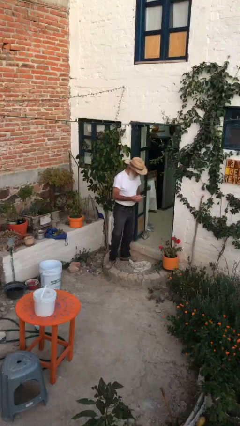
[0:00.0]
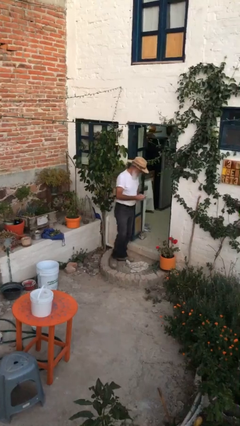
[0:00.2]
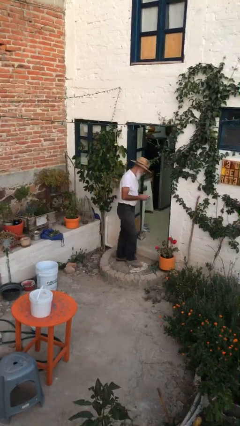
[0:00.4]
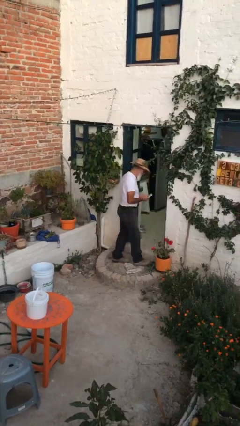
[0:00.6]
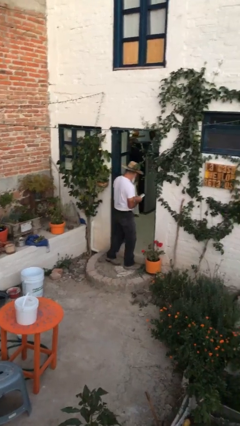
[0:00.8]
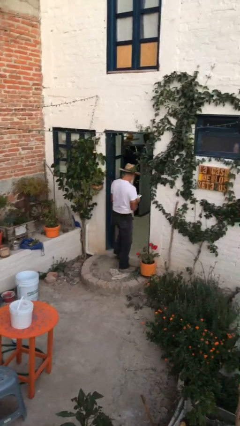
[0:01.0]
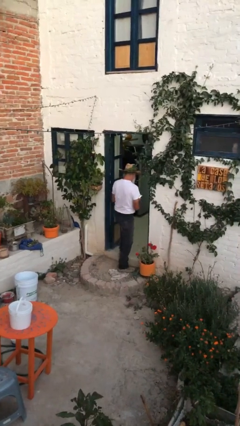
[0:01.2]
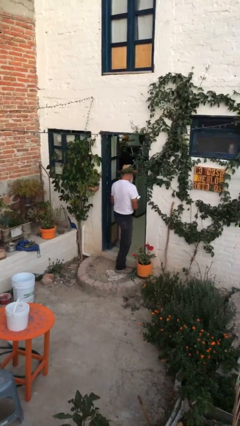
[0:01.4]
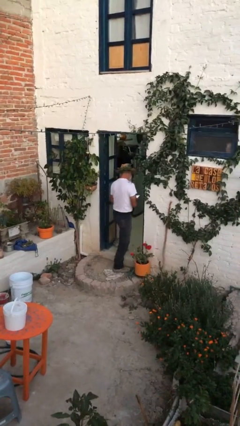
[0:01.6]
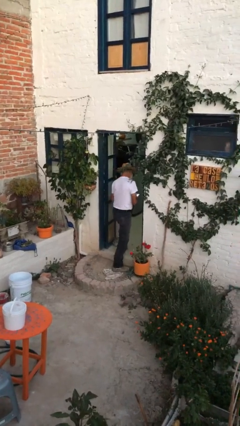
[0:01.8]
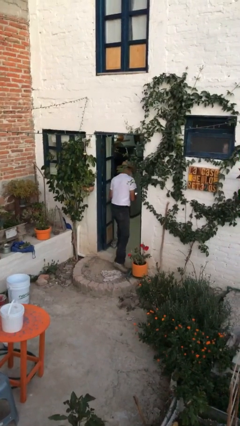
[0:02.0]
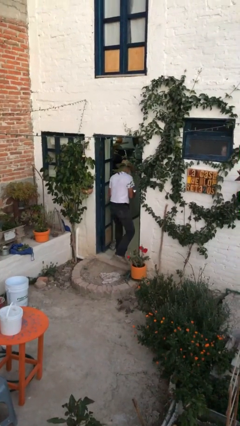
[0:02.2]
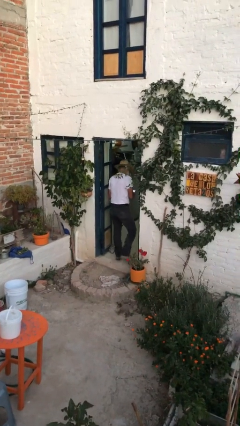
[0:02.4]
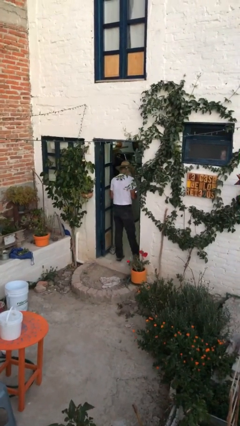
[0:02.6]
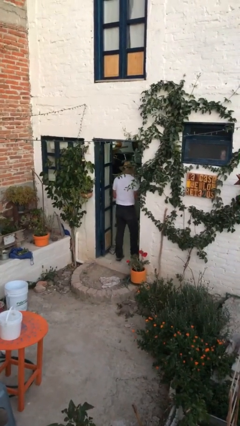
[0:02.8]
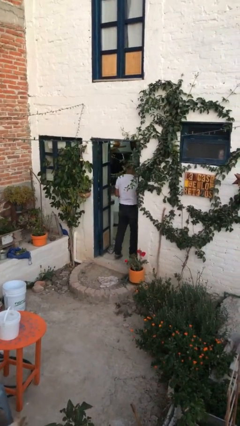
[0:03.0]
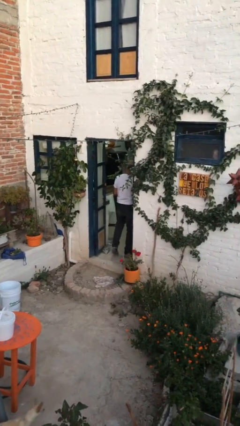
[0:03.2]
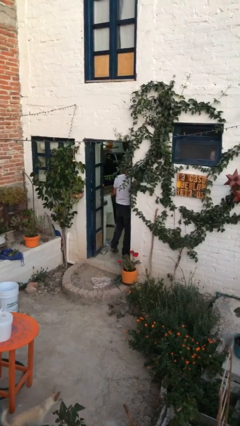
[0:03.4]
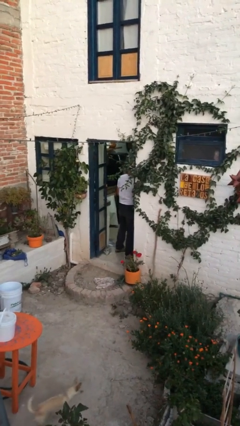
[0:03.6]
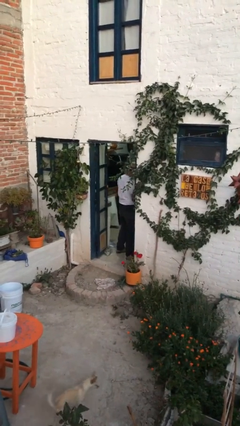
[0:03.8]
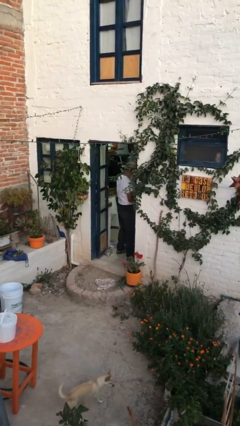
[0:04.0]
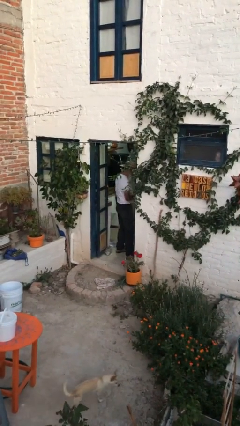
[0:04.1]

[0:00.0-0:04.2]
person exits scene through structure

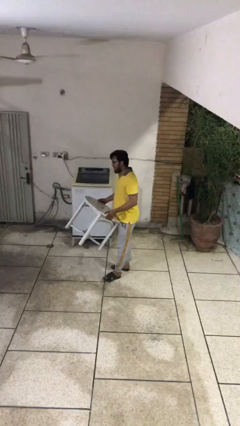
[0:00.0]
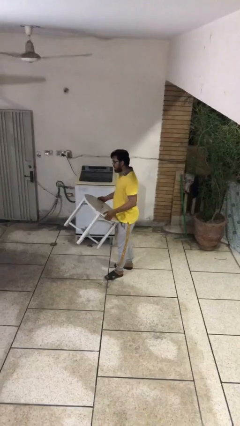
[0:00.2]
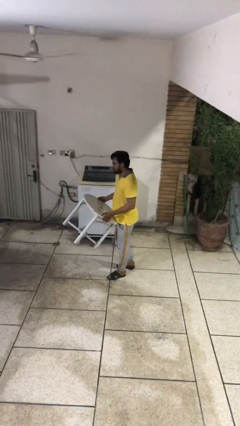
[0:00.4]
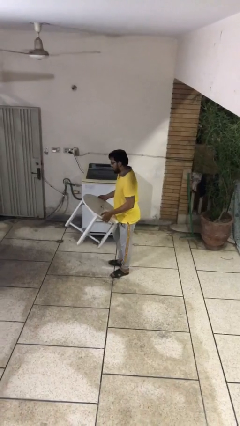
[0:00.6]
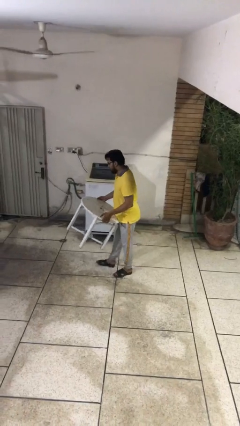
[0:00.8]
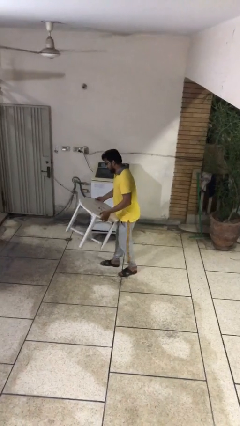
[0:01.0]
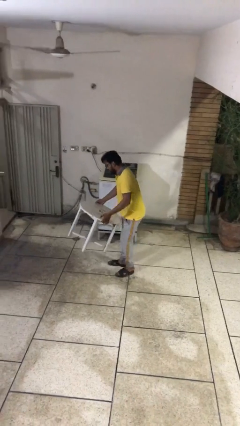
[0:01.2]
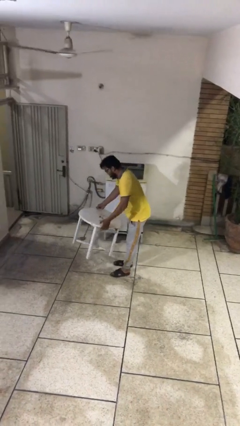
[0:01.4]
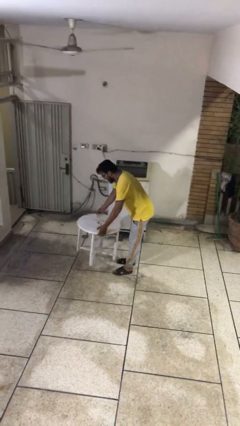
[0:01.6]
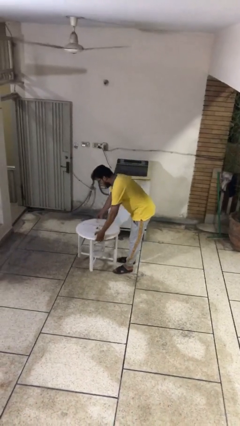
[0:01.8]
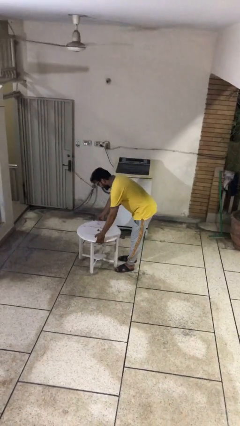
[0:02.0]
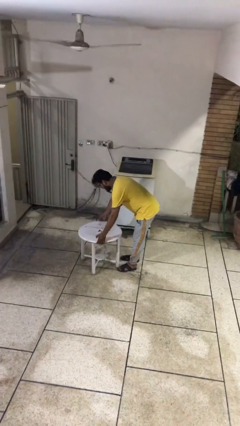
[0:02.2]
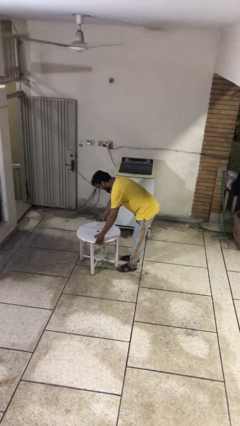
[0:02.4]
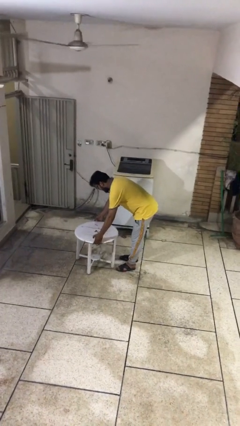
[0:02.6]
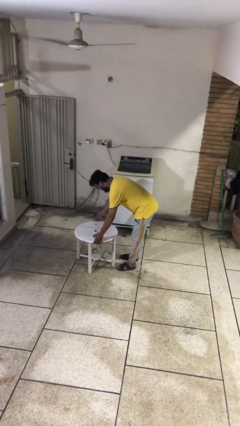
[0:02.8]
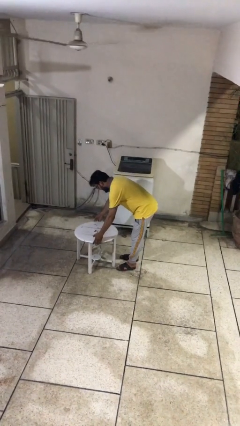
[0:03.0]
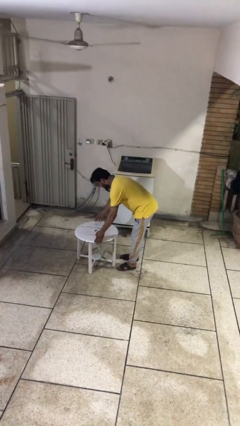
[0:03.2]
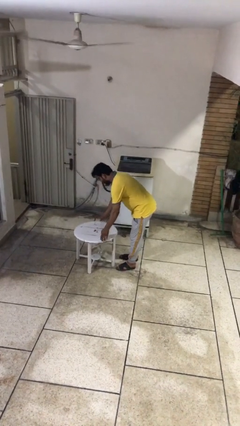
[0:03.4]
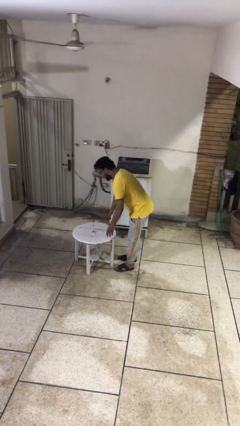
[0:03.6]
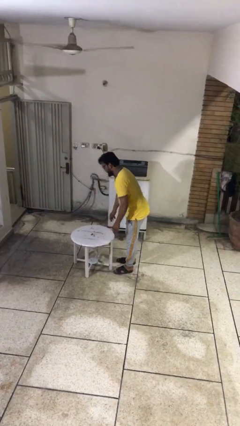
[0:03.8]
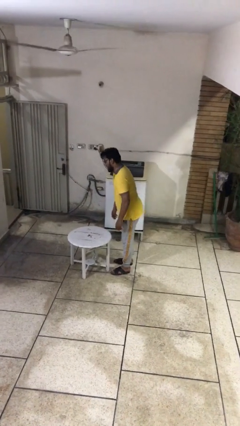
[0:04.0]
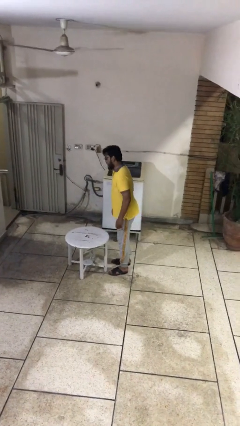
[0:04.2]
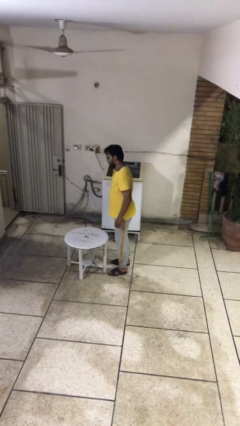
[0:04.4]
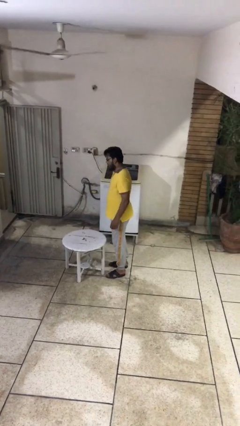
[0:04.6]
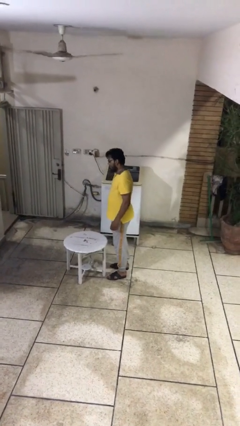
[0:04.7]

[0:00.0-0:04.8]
person puts down object on floor

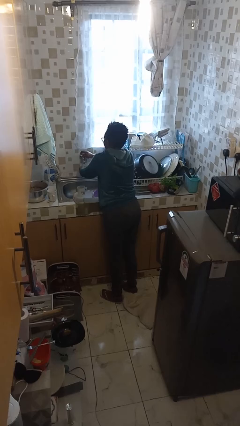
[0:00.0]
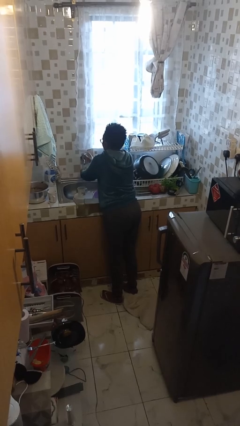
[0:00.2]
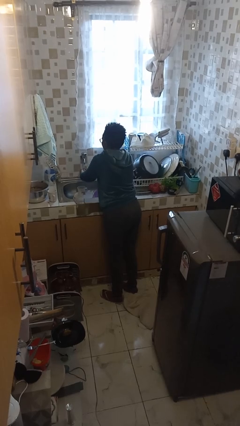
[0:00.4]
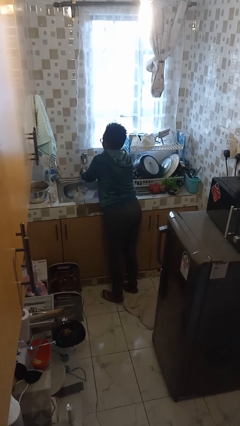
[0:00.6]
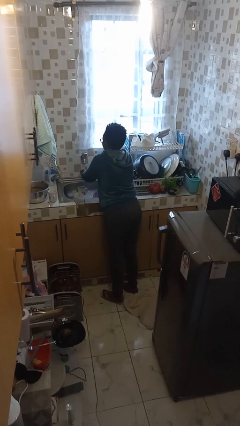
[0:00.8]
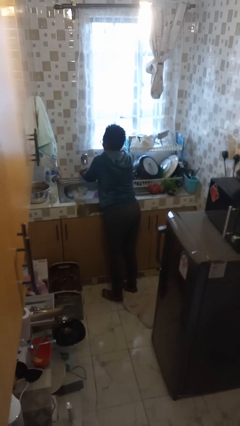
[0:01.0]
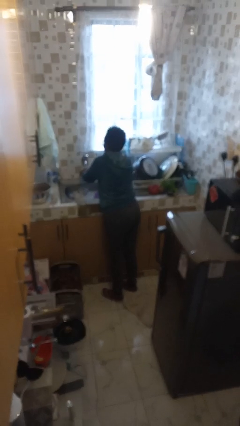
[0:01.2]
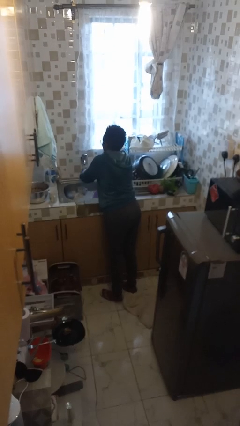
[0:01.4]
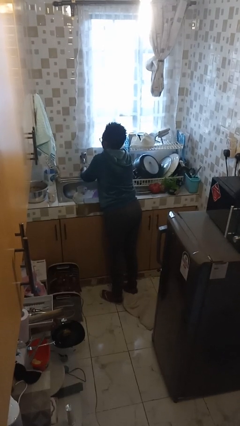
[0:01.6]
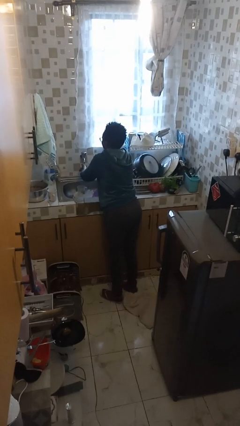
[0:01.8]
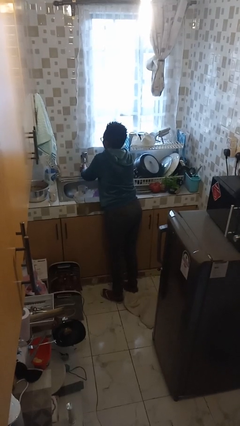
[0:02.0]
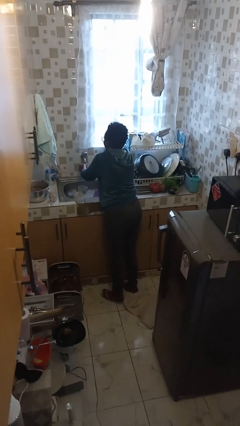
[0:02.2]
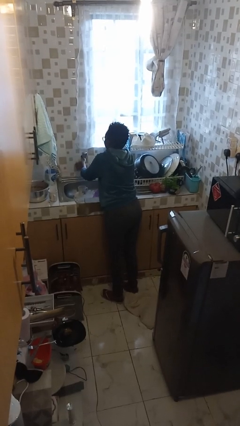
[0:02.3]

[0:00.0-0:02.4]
person washes hands

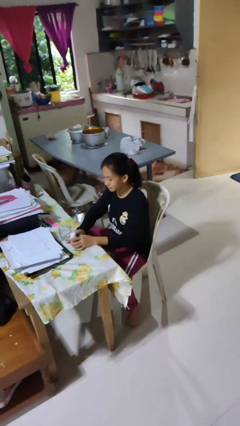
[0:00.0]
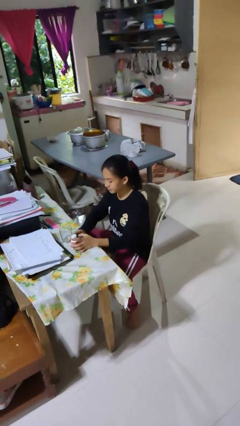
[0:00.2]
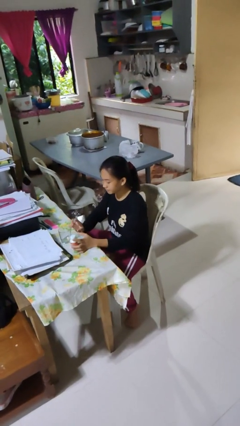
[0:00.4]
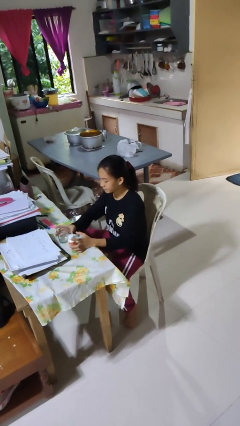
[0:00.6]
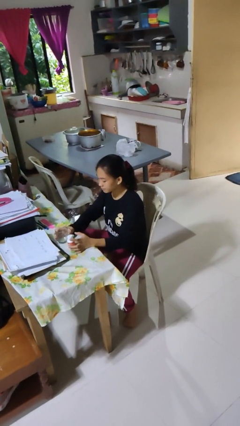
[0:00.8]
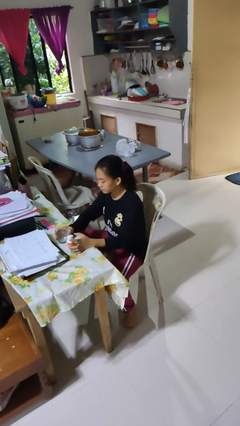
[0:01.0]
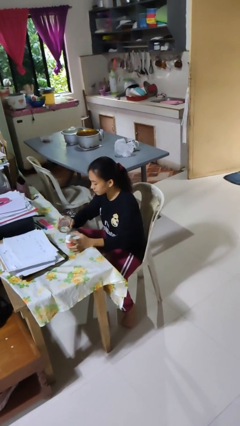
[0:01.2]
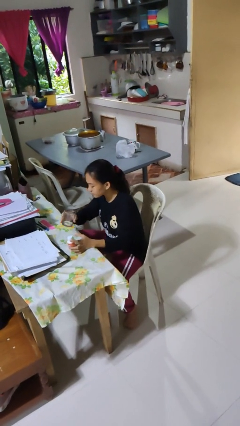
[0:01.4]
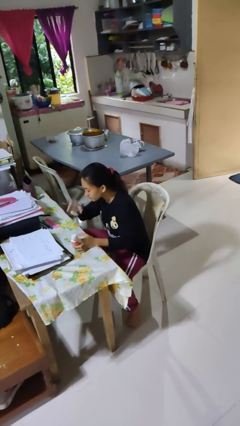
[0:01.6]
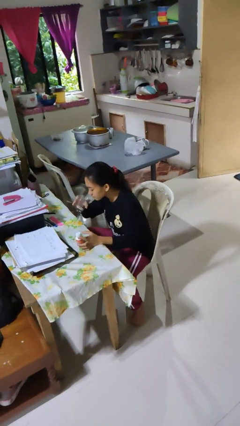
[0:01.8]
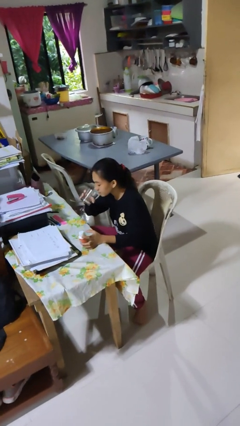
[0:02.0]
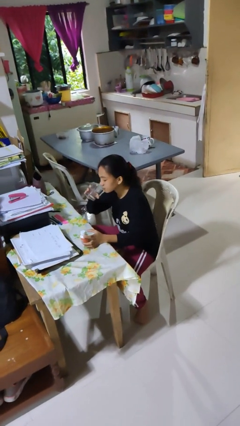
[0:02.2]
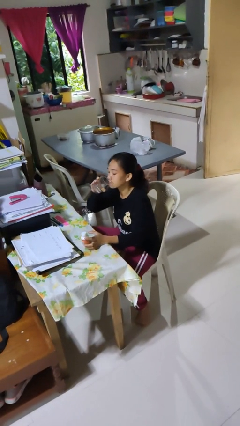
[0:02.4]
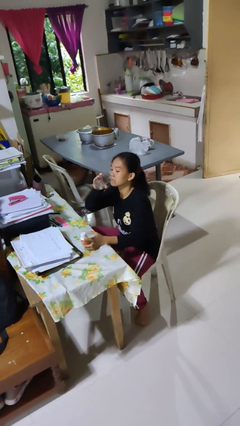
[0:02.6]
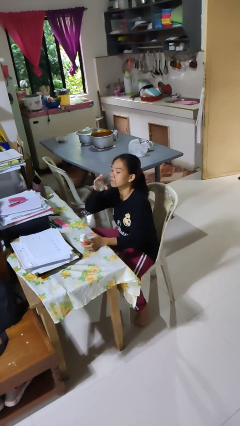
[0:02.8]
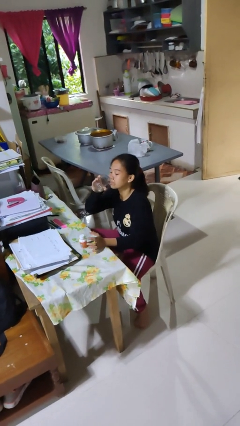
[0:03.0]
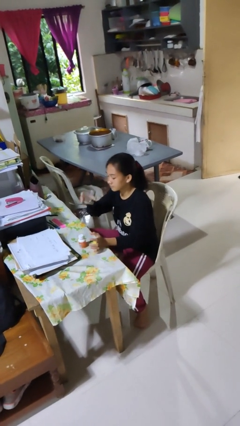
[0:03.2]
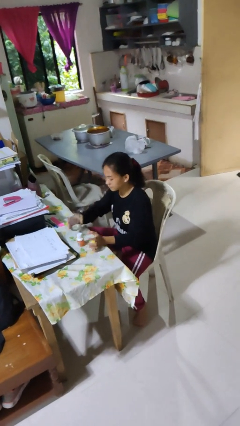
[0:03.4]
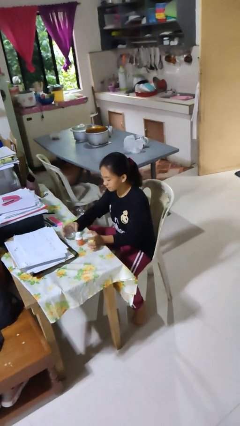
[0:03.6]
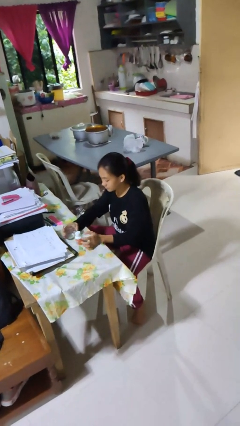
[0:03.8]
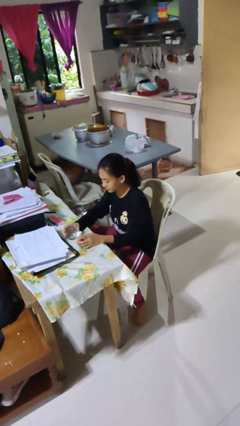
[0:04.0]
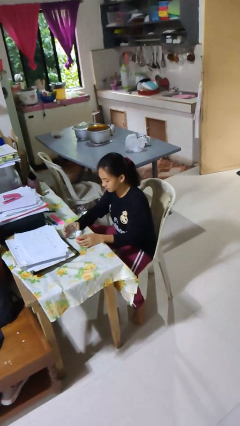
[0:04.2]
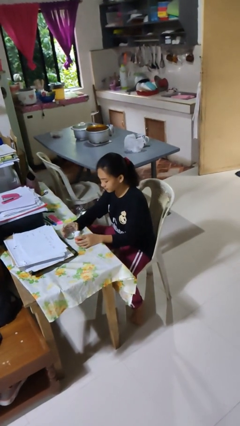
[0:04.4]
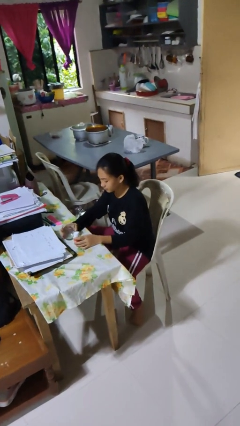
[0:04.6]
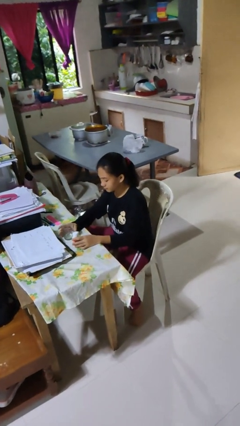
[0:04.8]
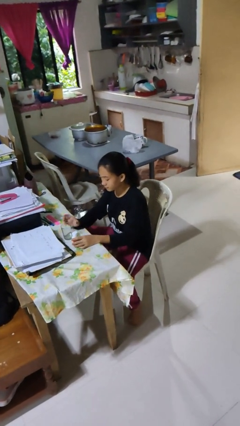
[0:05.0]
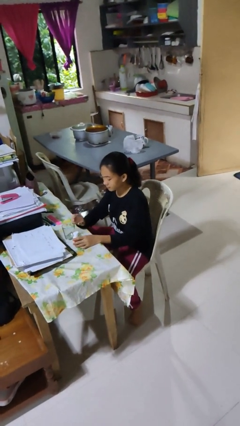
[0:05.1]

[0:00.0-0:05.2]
person drinks from cup

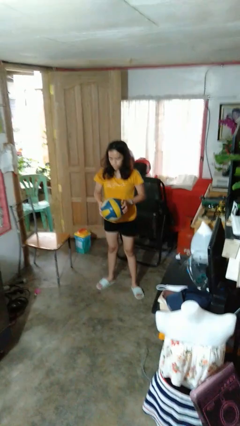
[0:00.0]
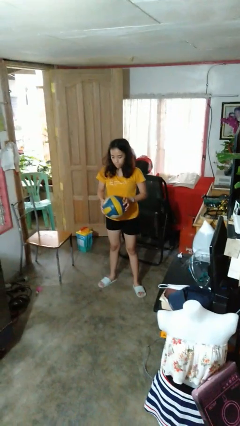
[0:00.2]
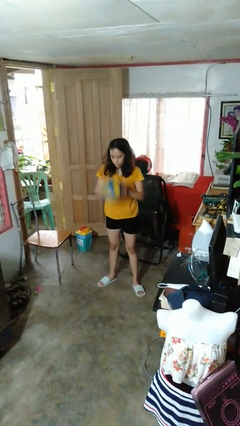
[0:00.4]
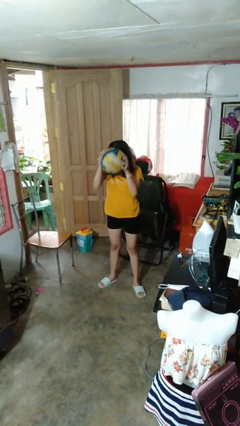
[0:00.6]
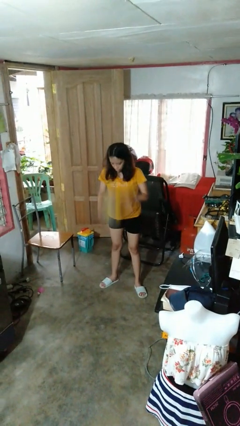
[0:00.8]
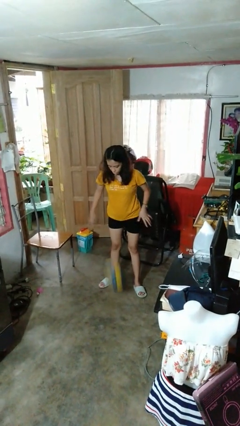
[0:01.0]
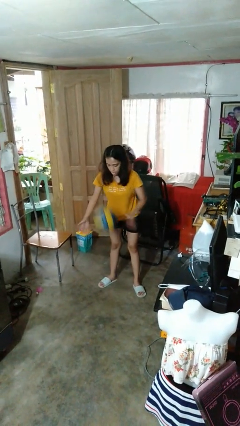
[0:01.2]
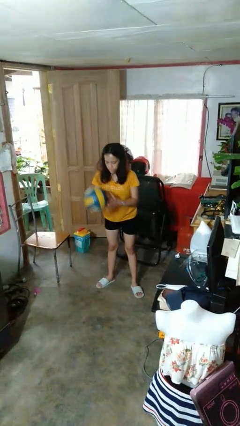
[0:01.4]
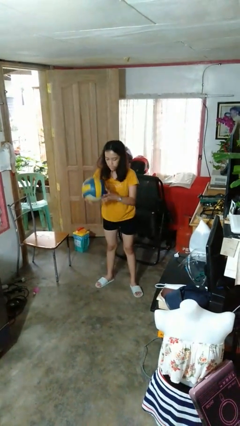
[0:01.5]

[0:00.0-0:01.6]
person bounces ball on floor
